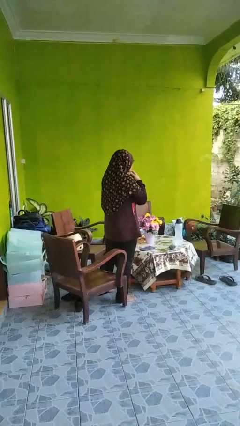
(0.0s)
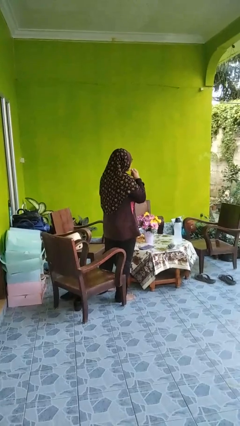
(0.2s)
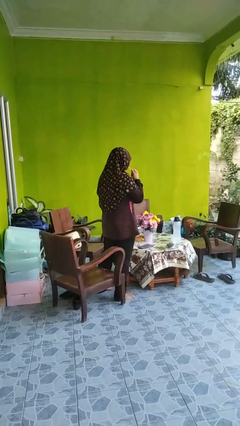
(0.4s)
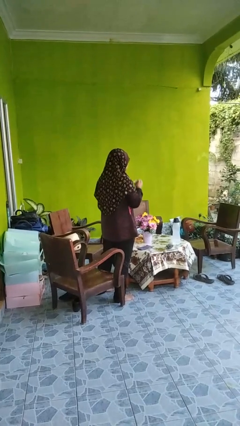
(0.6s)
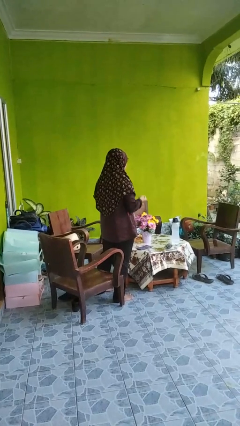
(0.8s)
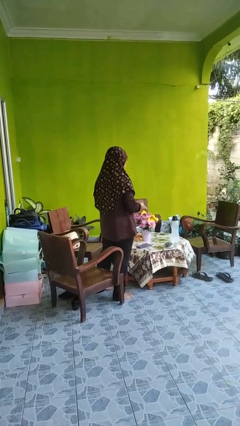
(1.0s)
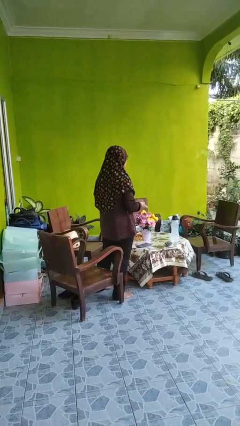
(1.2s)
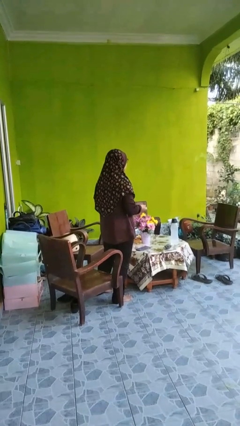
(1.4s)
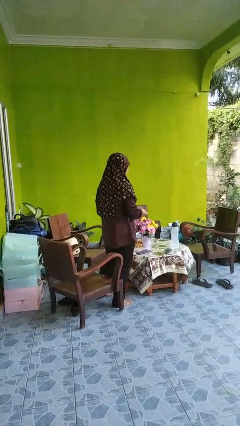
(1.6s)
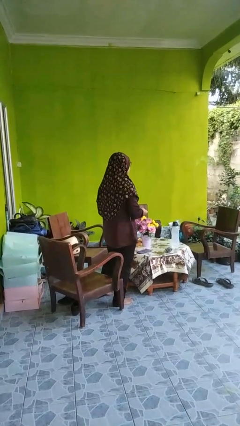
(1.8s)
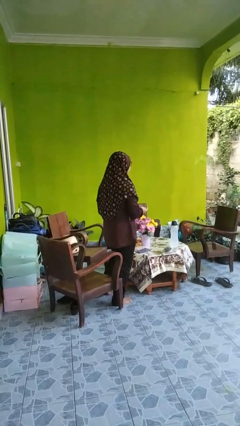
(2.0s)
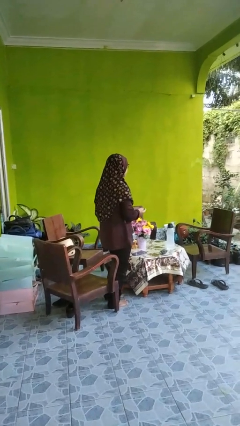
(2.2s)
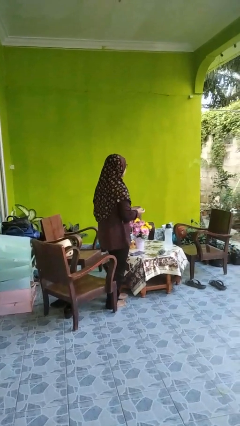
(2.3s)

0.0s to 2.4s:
person takes off headphones

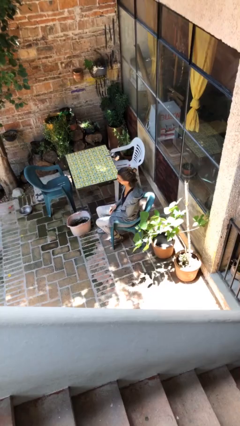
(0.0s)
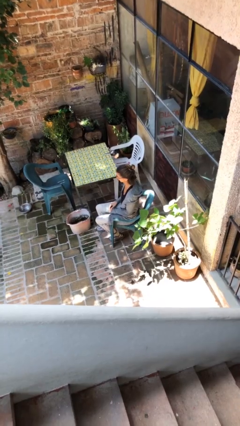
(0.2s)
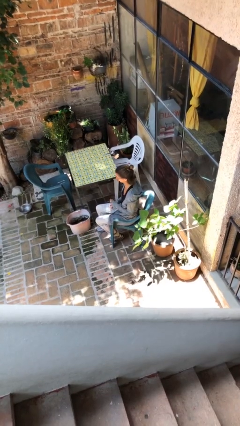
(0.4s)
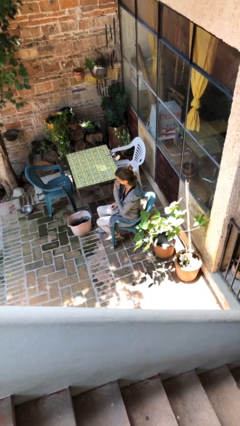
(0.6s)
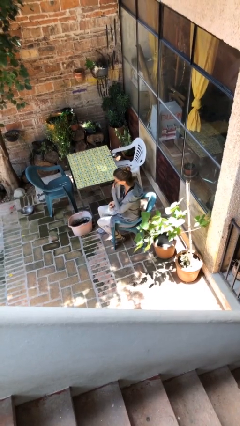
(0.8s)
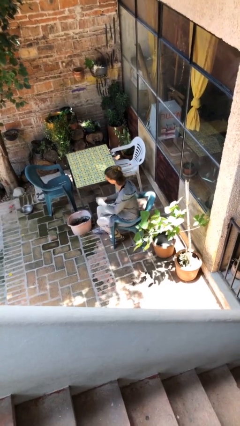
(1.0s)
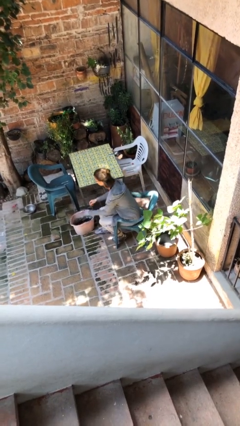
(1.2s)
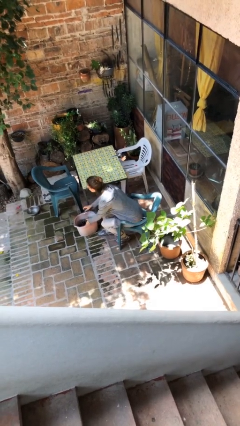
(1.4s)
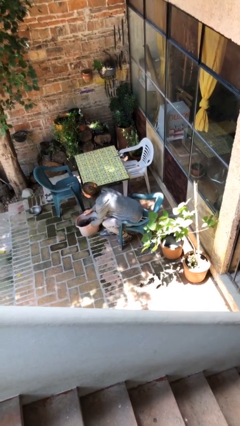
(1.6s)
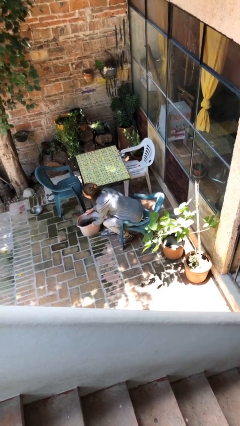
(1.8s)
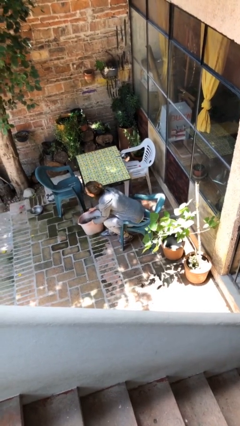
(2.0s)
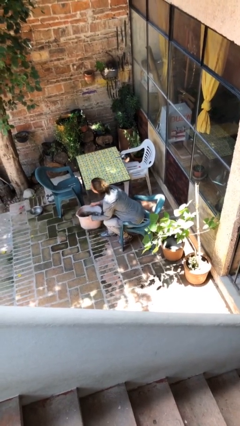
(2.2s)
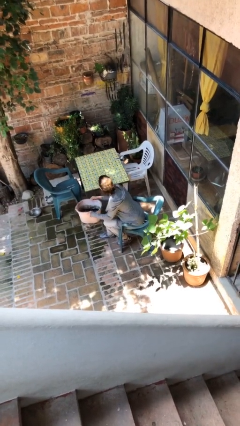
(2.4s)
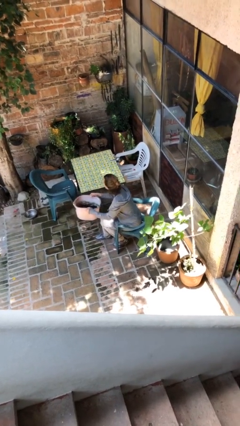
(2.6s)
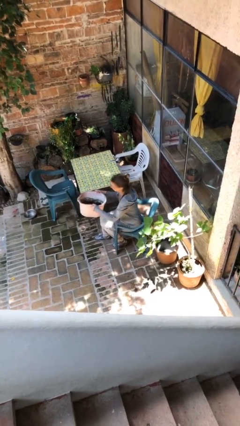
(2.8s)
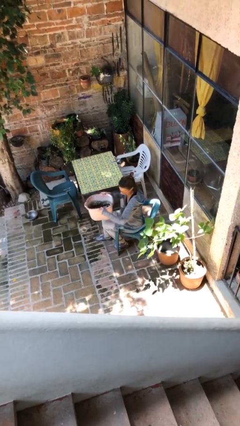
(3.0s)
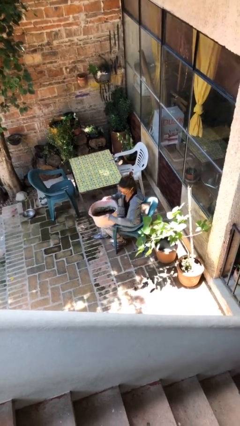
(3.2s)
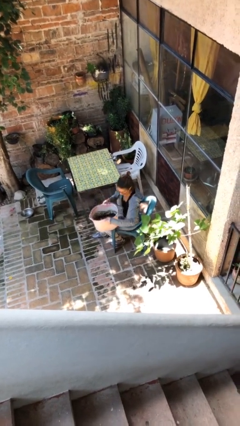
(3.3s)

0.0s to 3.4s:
person picks up object from floor

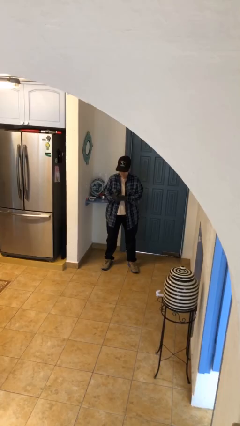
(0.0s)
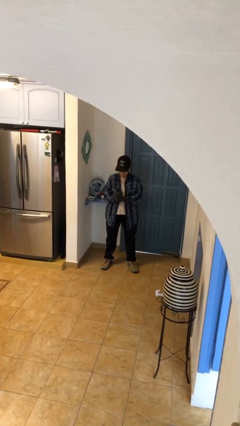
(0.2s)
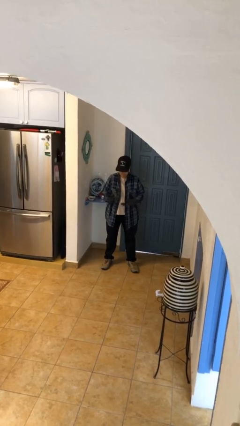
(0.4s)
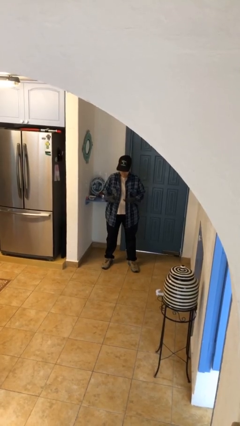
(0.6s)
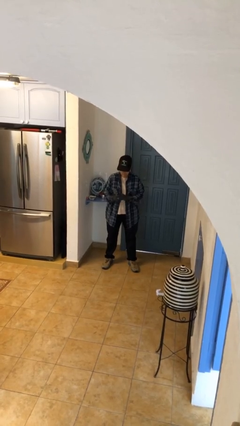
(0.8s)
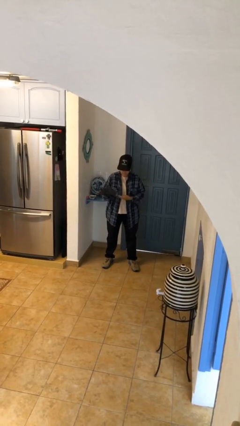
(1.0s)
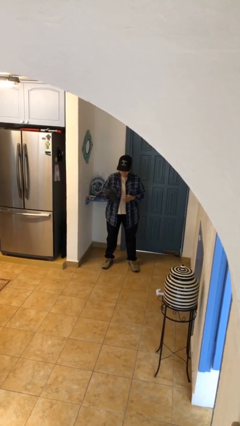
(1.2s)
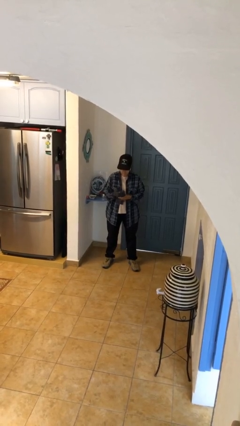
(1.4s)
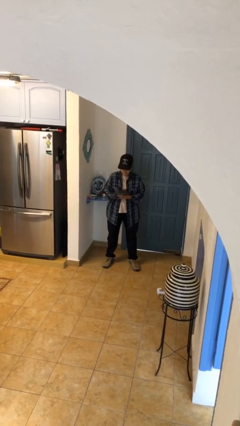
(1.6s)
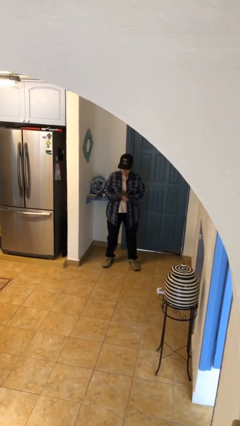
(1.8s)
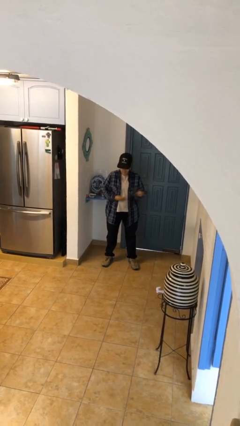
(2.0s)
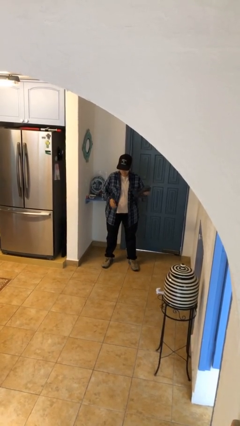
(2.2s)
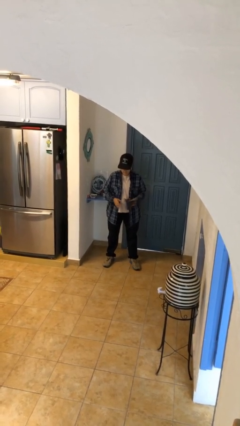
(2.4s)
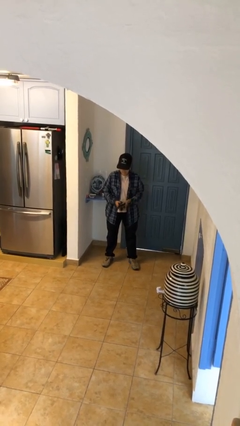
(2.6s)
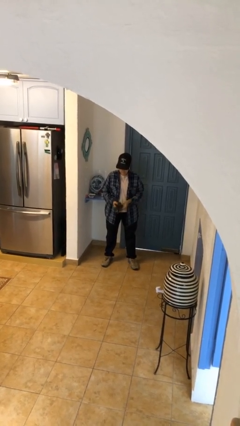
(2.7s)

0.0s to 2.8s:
person takes off gloves

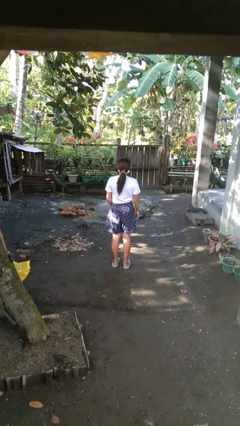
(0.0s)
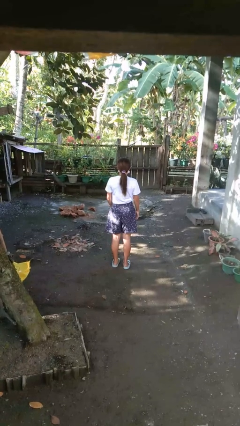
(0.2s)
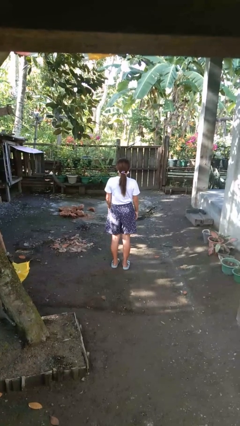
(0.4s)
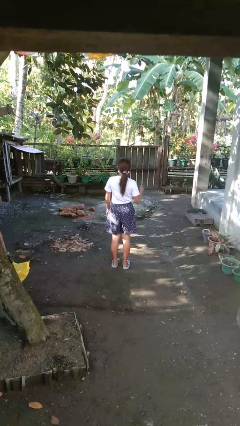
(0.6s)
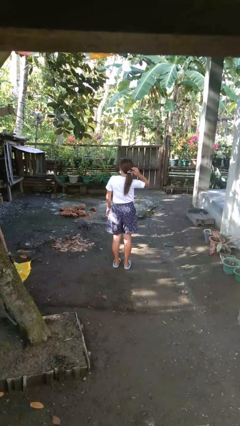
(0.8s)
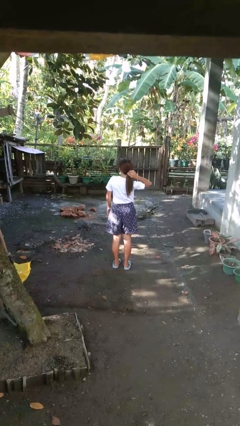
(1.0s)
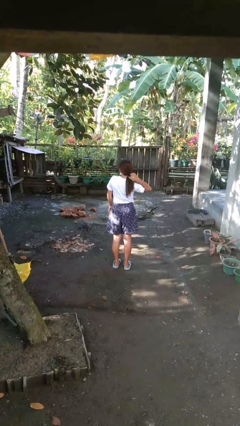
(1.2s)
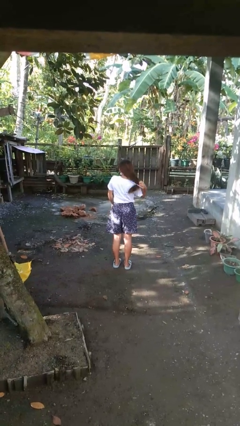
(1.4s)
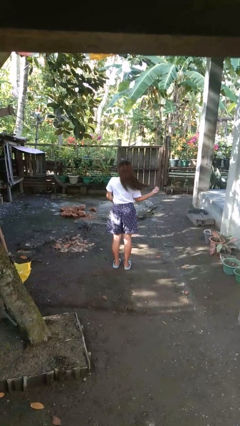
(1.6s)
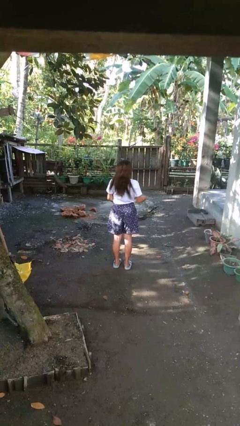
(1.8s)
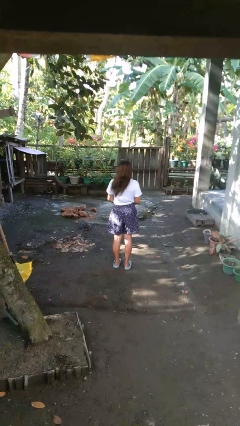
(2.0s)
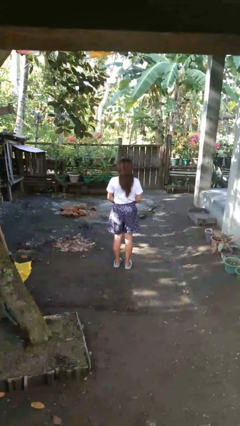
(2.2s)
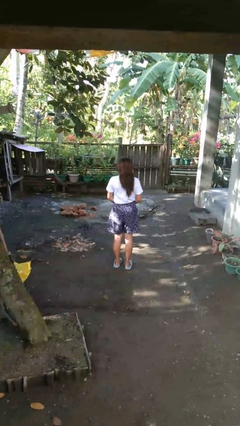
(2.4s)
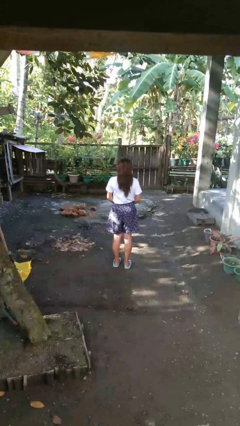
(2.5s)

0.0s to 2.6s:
person takes off hairtie

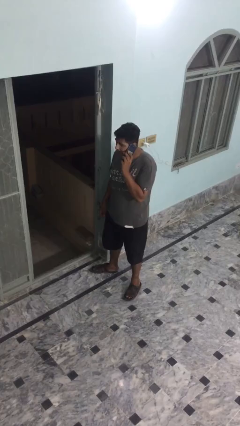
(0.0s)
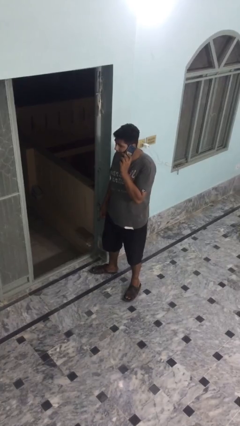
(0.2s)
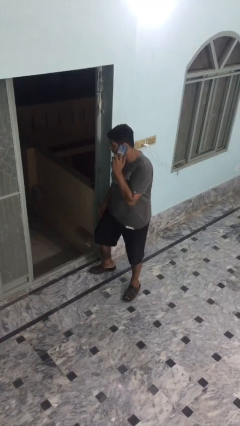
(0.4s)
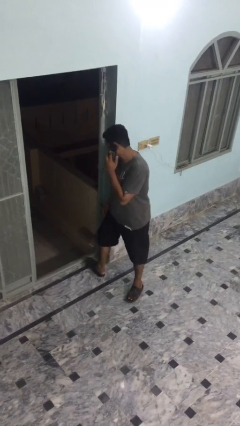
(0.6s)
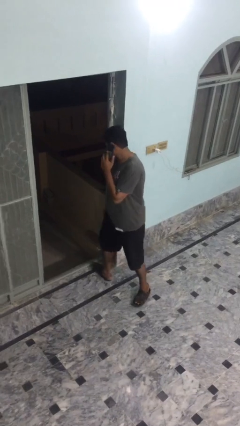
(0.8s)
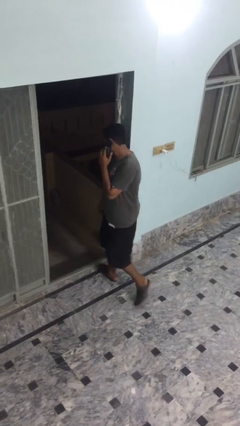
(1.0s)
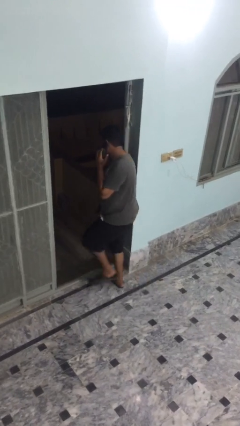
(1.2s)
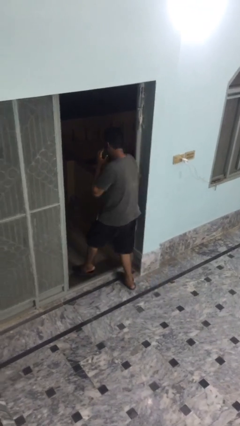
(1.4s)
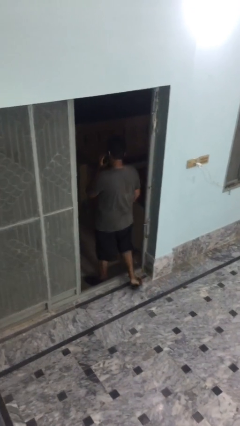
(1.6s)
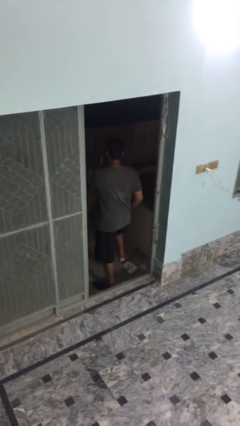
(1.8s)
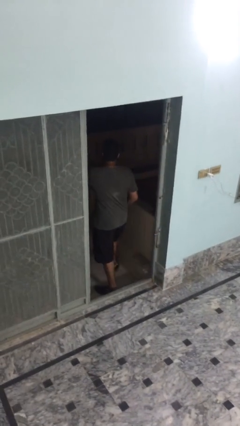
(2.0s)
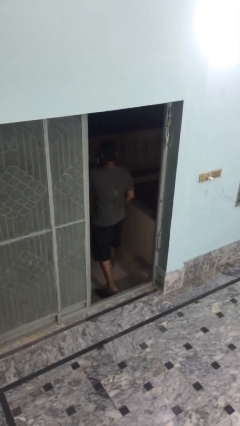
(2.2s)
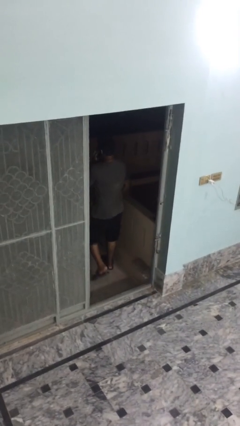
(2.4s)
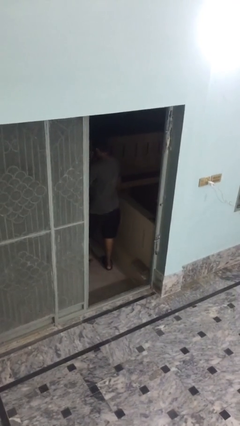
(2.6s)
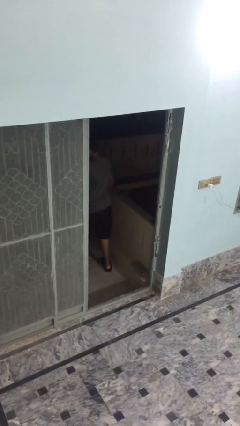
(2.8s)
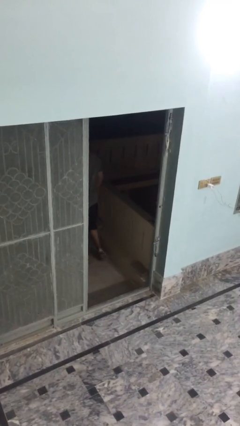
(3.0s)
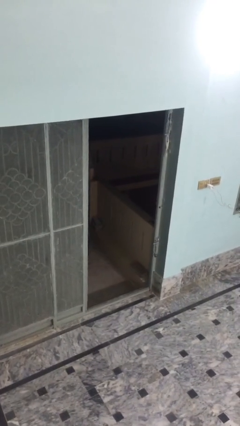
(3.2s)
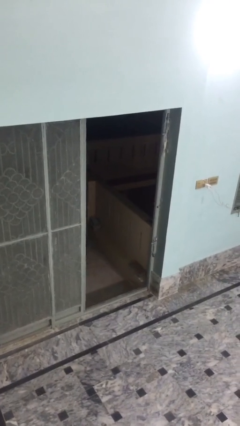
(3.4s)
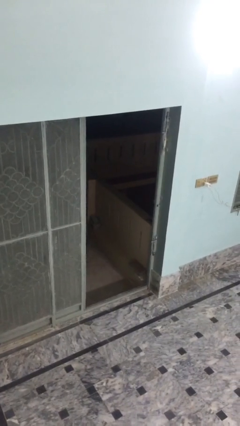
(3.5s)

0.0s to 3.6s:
person exits scene through structure

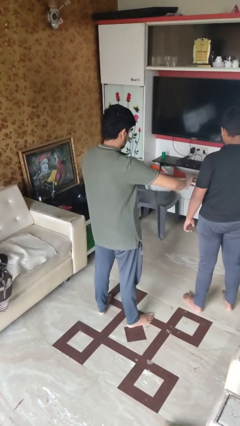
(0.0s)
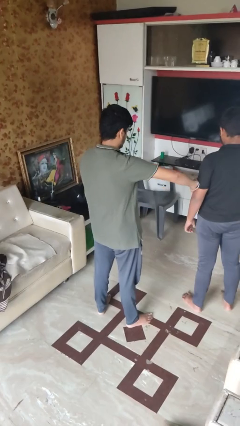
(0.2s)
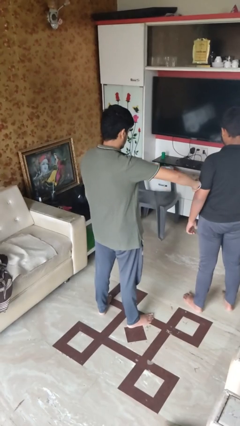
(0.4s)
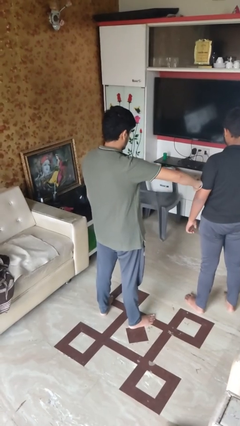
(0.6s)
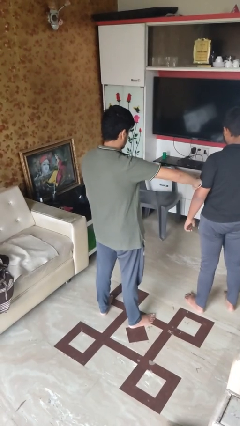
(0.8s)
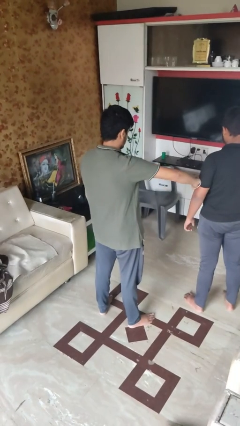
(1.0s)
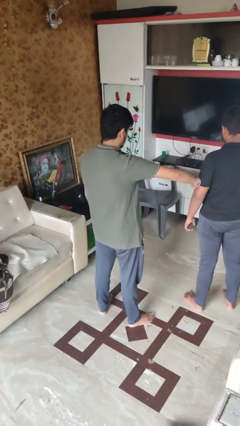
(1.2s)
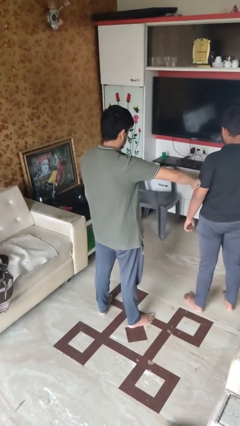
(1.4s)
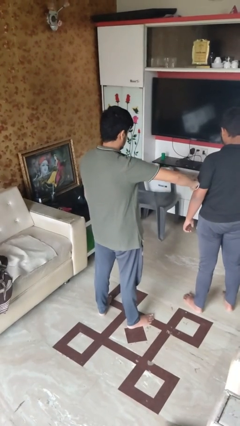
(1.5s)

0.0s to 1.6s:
person grabs person by bicep

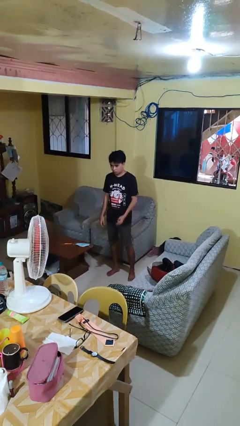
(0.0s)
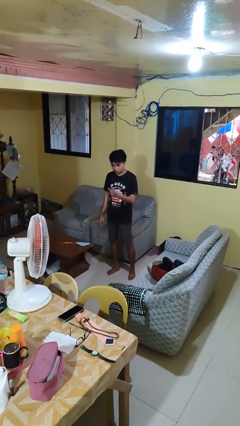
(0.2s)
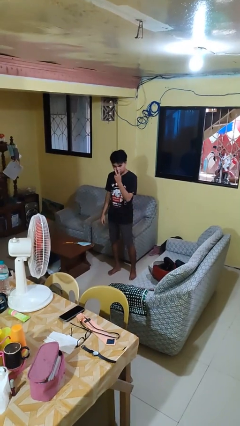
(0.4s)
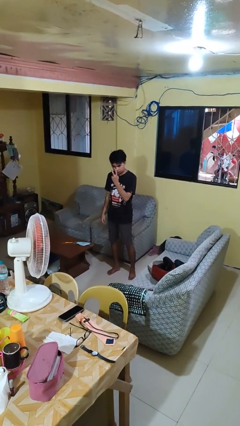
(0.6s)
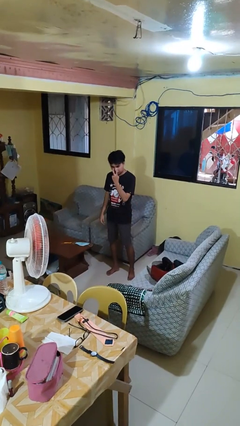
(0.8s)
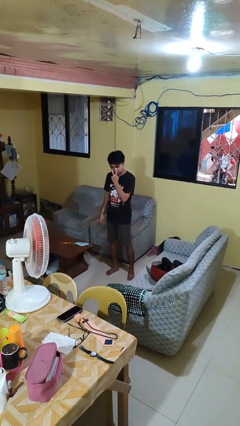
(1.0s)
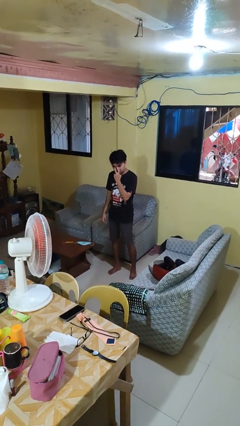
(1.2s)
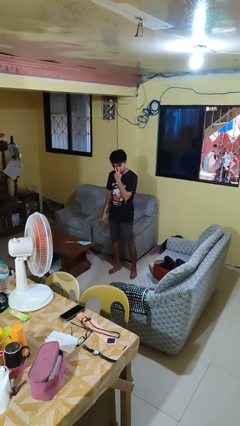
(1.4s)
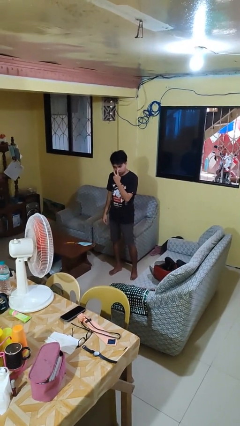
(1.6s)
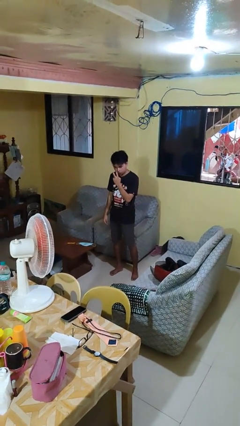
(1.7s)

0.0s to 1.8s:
person gestures watch closely
